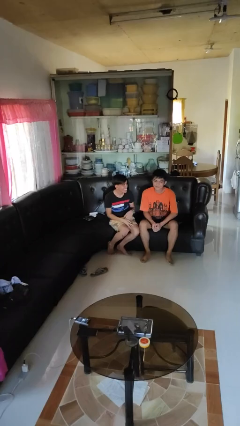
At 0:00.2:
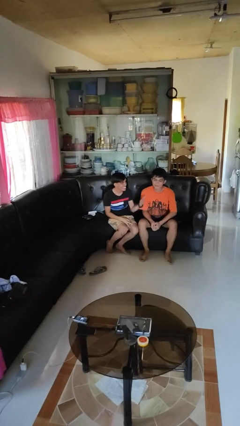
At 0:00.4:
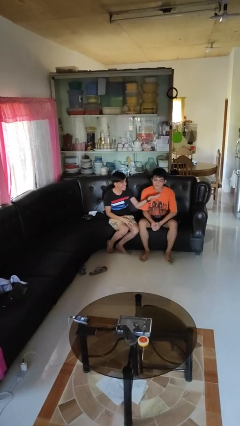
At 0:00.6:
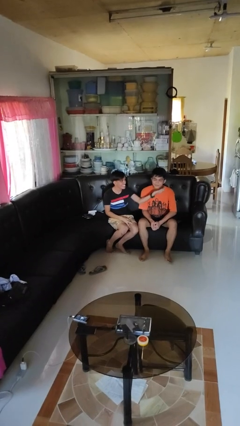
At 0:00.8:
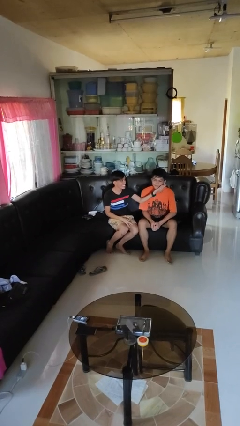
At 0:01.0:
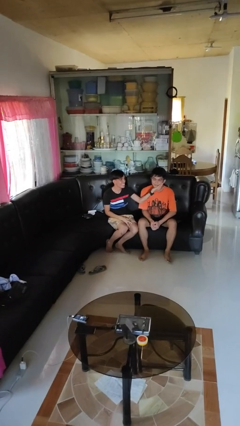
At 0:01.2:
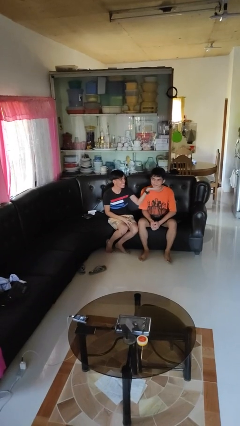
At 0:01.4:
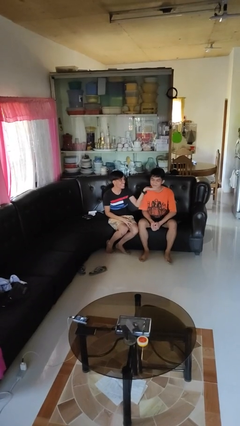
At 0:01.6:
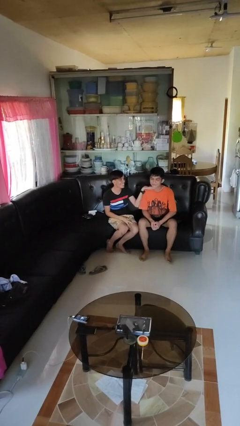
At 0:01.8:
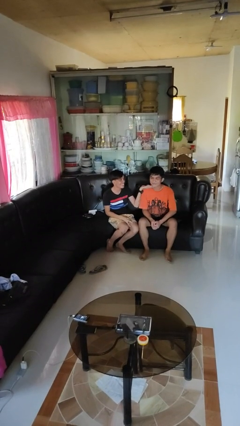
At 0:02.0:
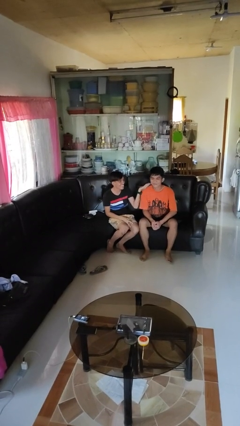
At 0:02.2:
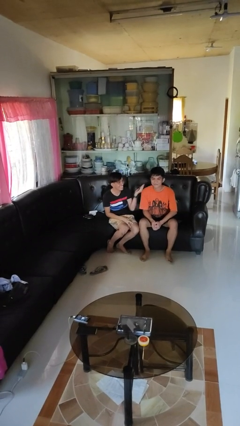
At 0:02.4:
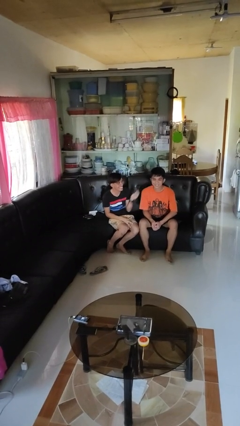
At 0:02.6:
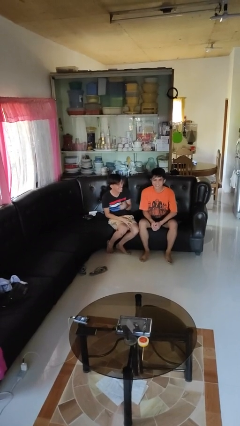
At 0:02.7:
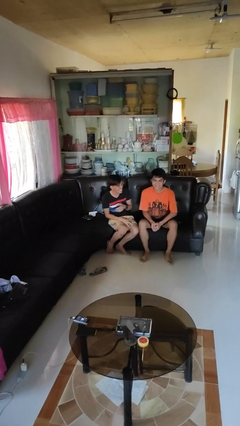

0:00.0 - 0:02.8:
person touches face of person

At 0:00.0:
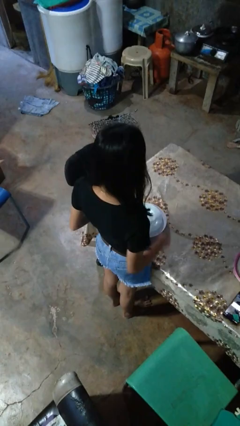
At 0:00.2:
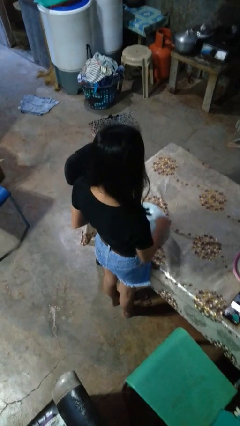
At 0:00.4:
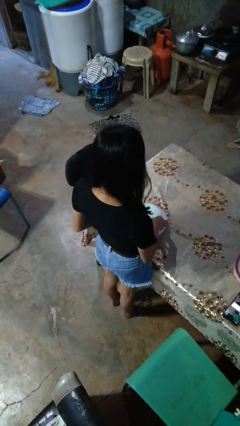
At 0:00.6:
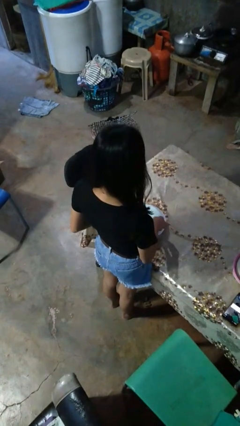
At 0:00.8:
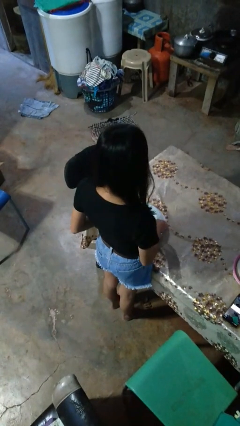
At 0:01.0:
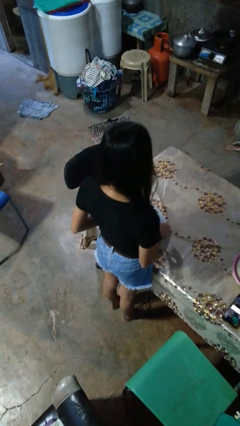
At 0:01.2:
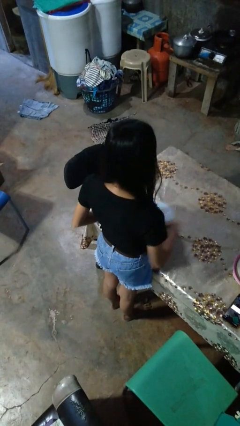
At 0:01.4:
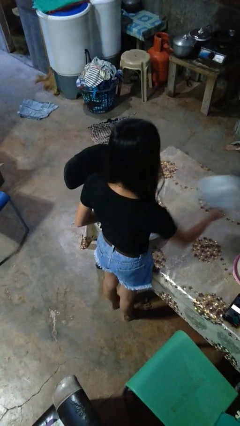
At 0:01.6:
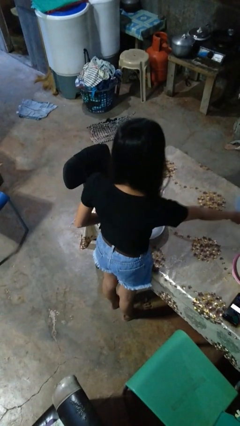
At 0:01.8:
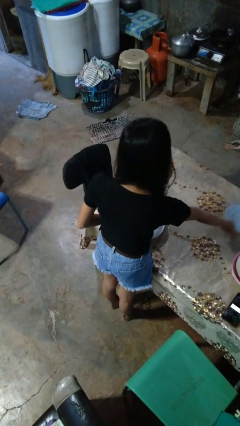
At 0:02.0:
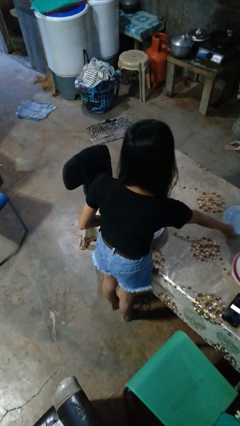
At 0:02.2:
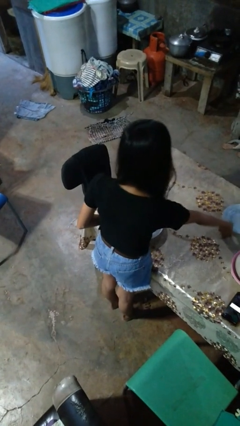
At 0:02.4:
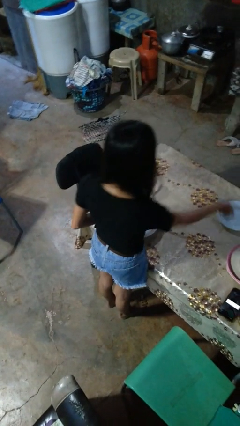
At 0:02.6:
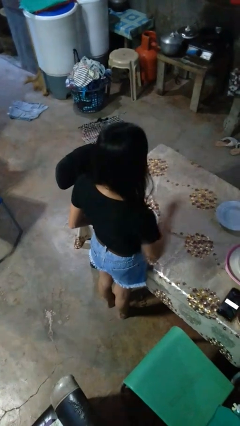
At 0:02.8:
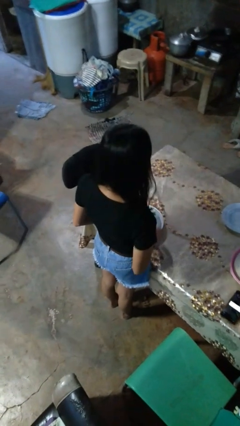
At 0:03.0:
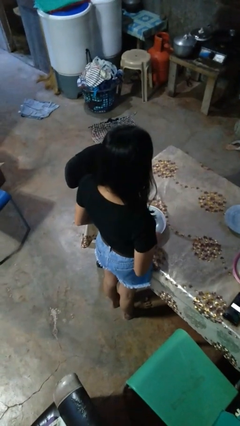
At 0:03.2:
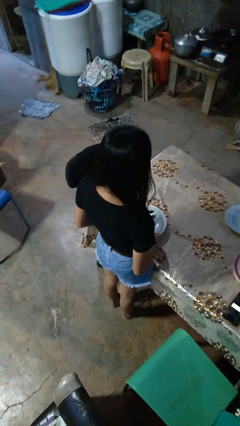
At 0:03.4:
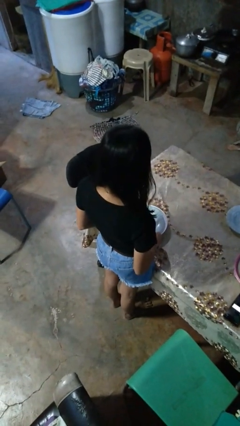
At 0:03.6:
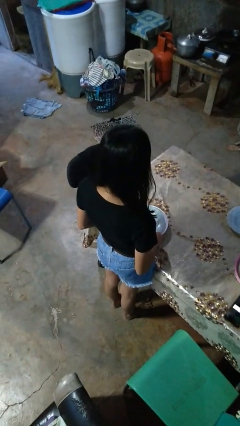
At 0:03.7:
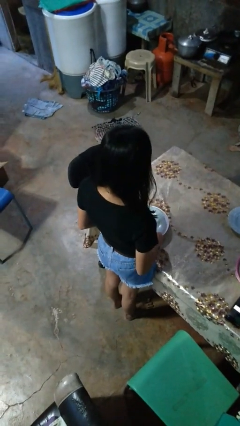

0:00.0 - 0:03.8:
person sets table

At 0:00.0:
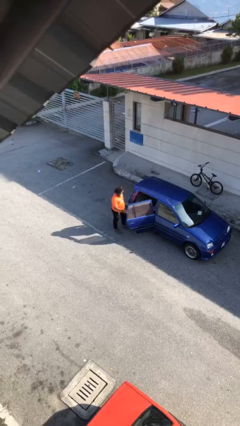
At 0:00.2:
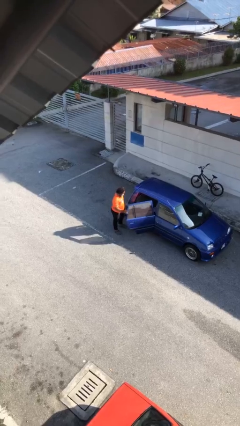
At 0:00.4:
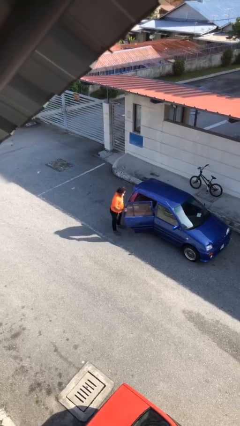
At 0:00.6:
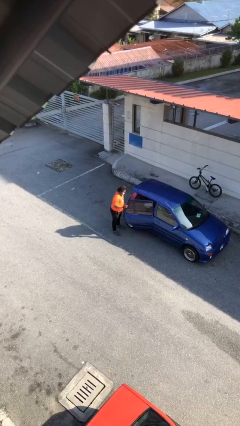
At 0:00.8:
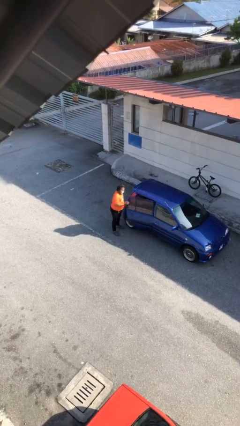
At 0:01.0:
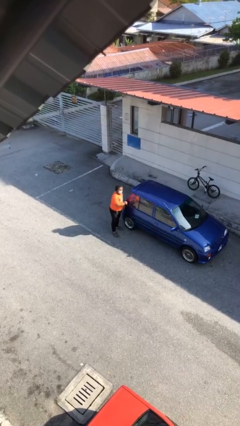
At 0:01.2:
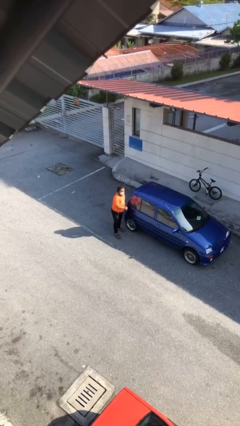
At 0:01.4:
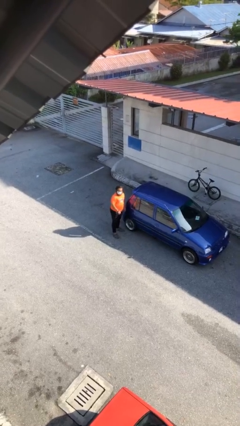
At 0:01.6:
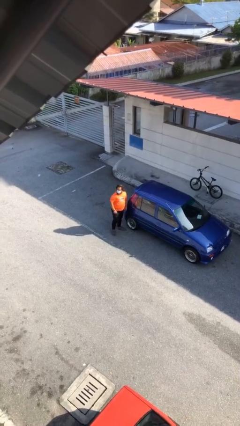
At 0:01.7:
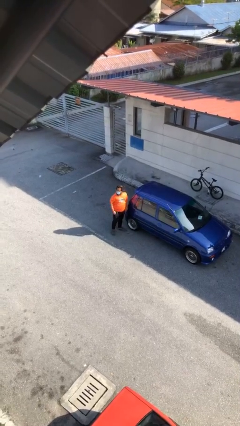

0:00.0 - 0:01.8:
person closes car door

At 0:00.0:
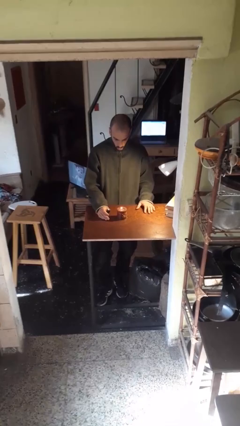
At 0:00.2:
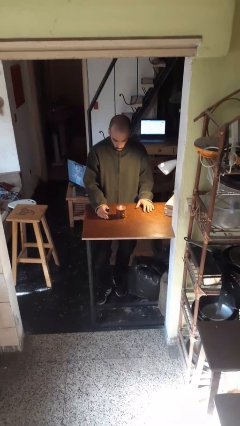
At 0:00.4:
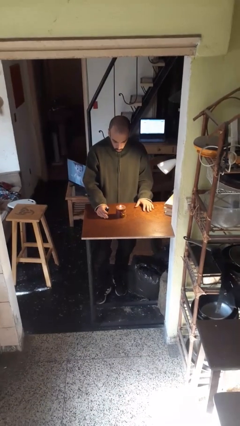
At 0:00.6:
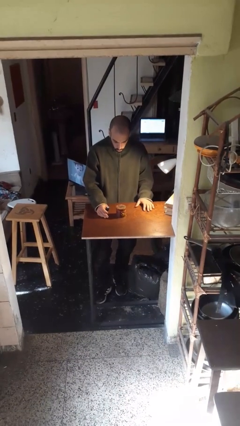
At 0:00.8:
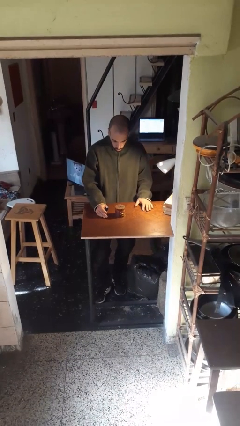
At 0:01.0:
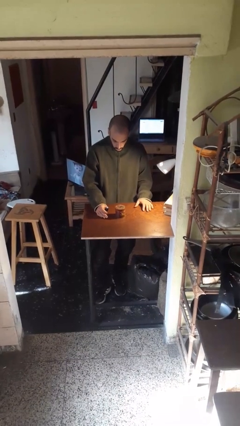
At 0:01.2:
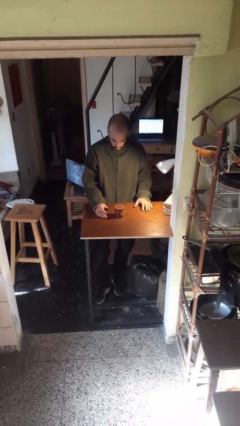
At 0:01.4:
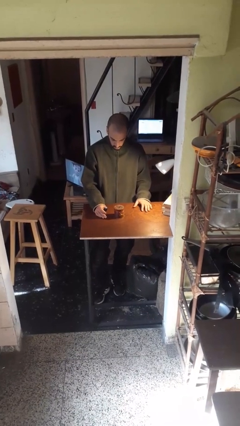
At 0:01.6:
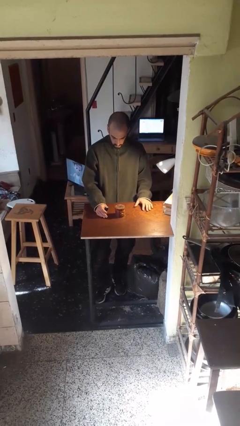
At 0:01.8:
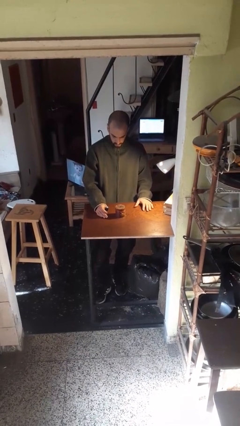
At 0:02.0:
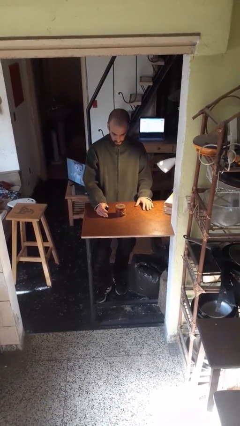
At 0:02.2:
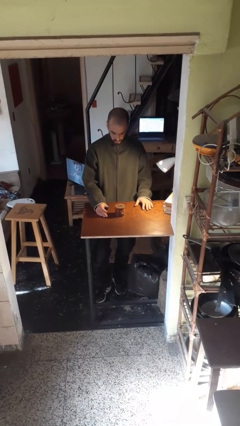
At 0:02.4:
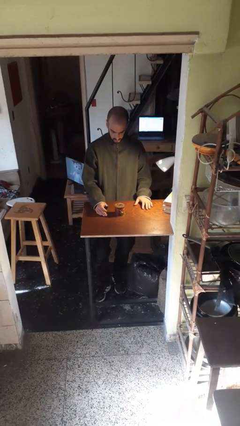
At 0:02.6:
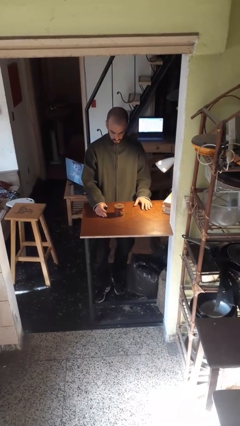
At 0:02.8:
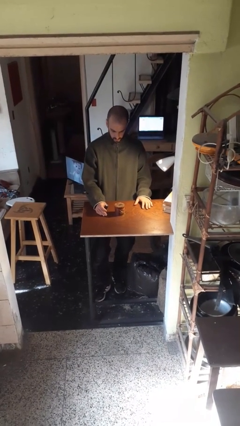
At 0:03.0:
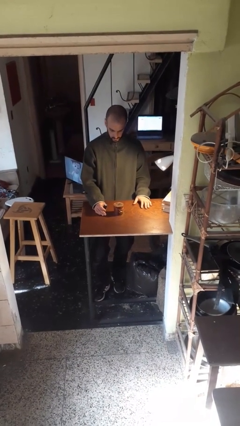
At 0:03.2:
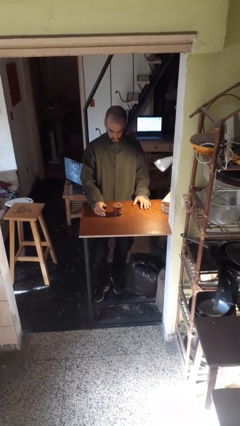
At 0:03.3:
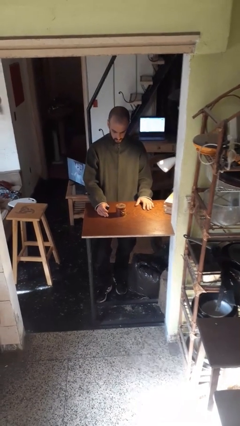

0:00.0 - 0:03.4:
person extinguishes candle

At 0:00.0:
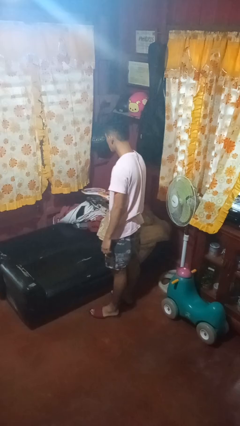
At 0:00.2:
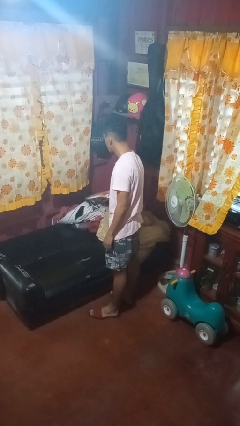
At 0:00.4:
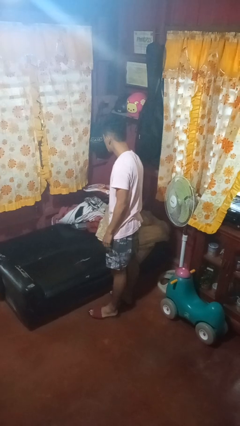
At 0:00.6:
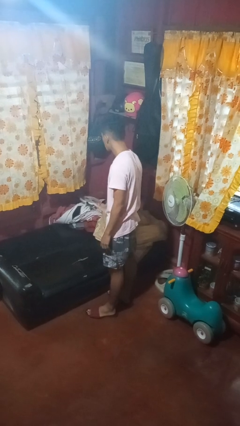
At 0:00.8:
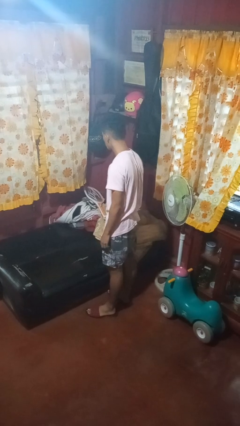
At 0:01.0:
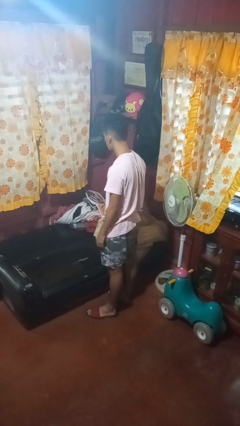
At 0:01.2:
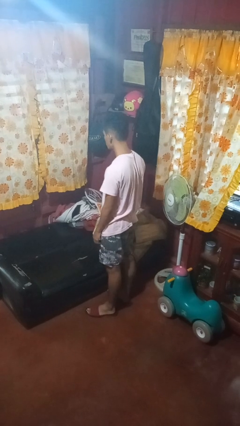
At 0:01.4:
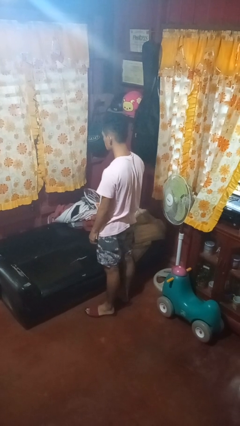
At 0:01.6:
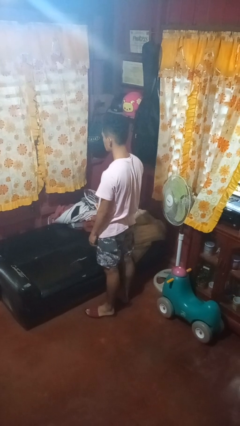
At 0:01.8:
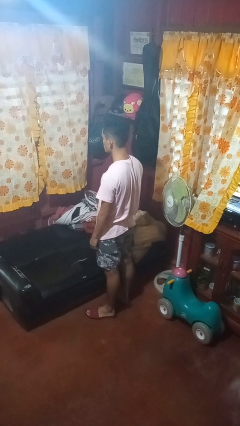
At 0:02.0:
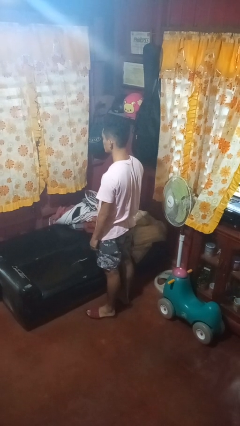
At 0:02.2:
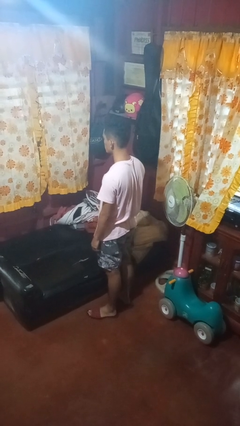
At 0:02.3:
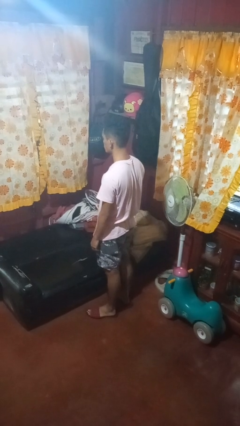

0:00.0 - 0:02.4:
person puts down object on couch

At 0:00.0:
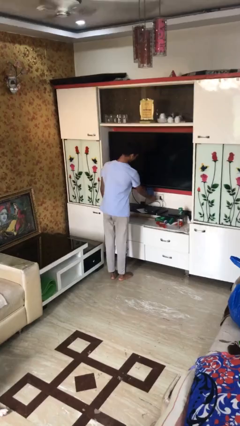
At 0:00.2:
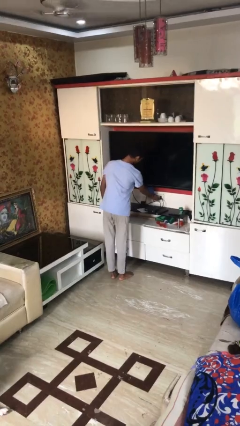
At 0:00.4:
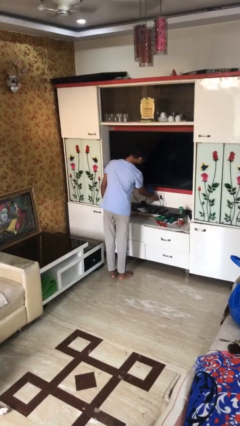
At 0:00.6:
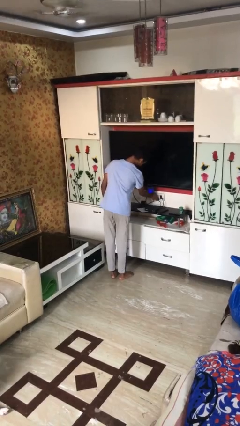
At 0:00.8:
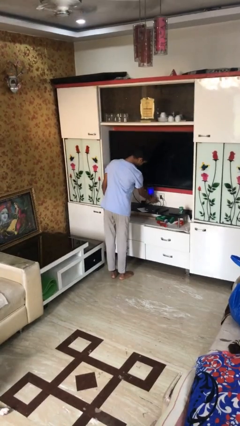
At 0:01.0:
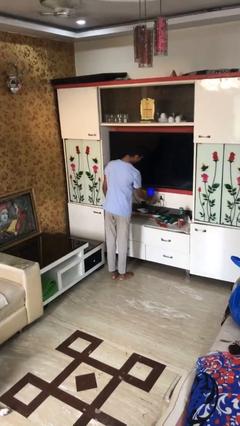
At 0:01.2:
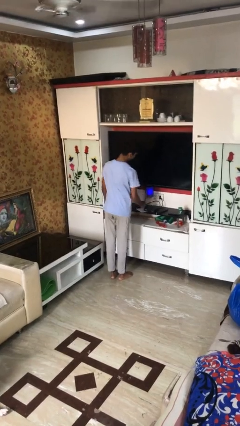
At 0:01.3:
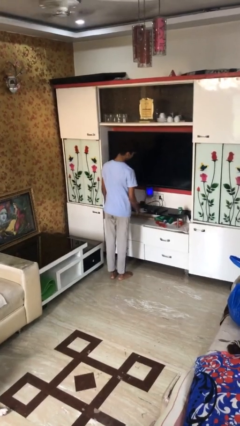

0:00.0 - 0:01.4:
person turns on lamp

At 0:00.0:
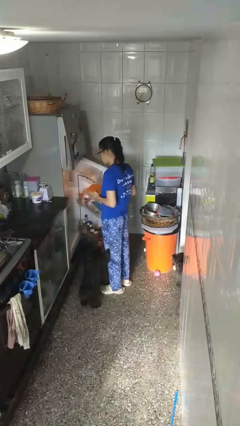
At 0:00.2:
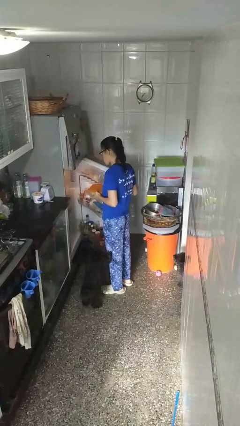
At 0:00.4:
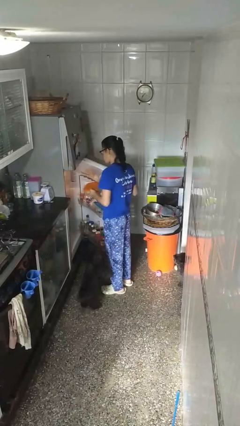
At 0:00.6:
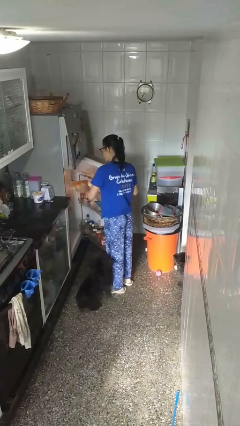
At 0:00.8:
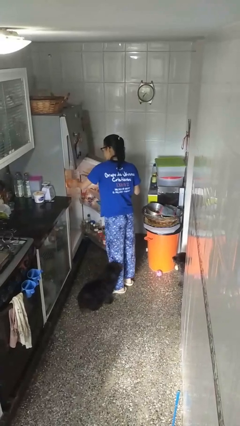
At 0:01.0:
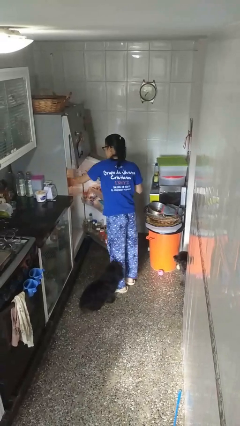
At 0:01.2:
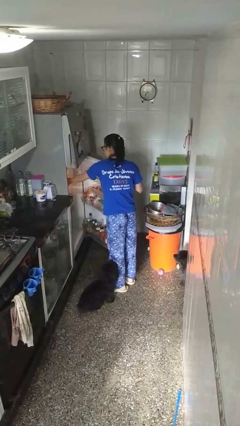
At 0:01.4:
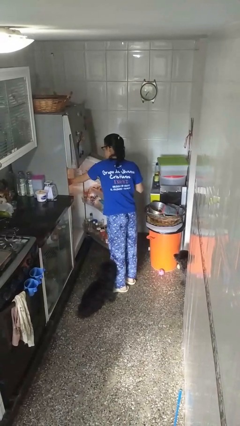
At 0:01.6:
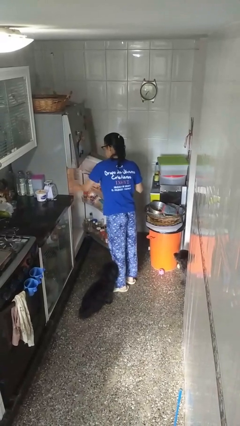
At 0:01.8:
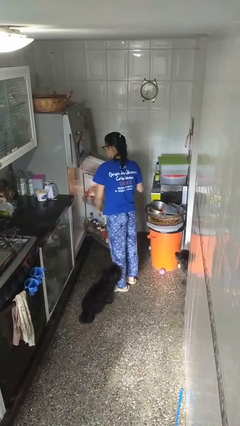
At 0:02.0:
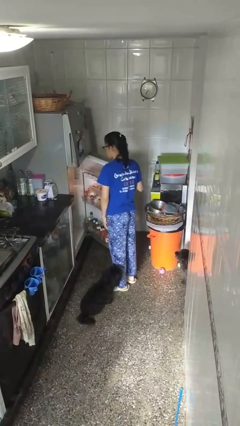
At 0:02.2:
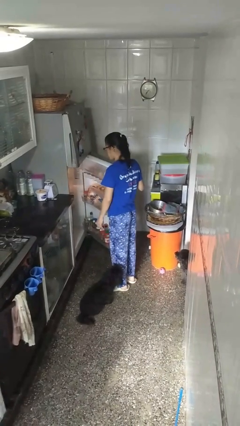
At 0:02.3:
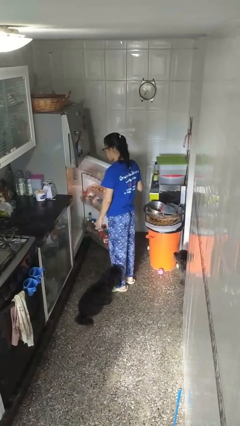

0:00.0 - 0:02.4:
person puts object into refrigerator
